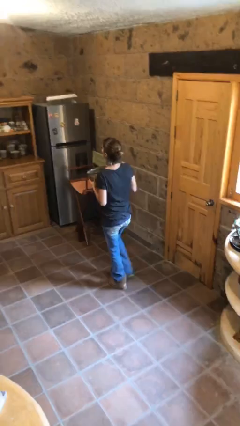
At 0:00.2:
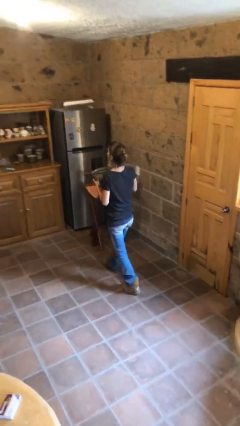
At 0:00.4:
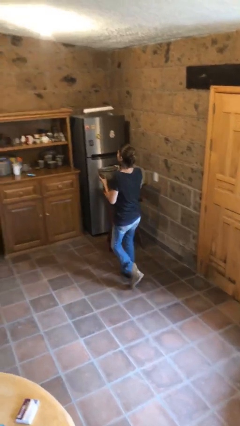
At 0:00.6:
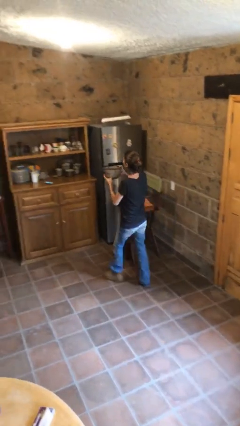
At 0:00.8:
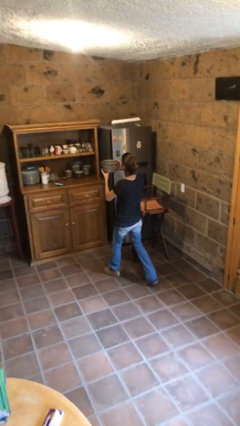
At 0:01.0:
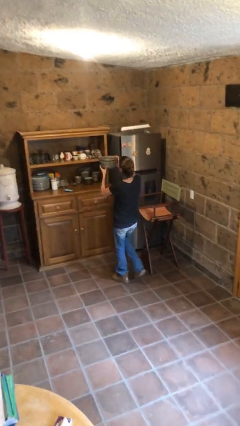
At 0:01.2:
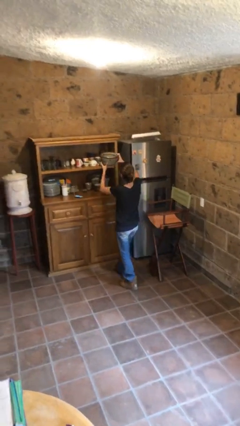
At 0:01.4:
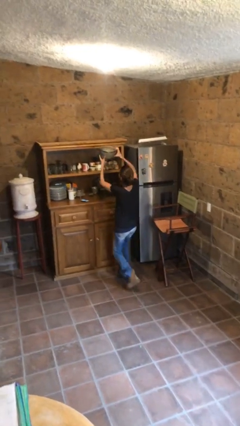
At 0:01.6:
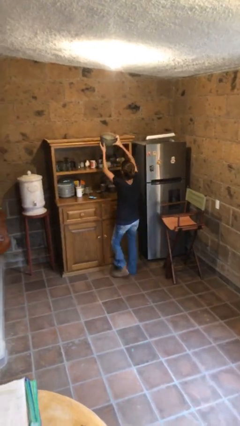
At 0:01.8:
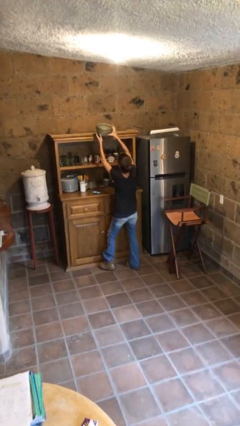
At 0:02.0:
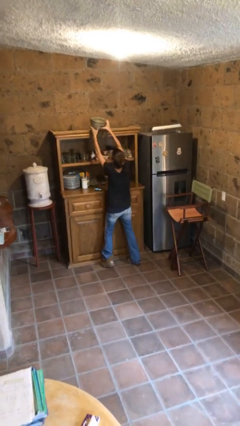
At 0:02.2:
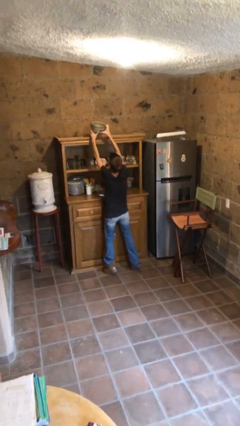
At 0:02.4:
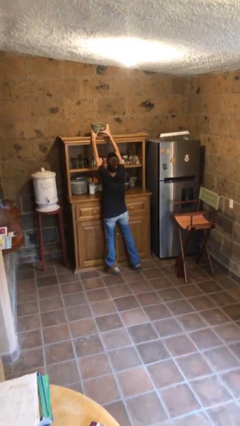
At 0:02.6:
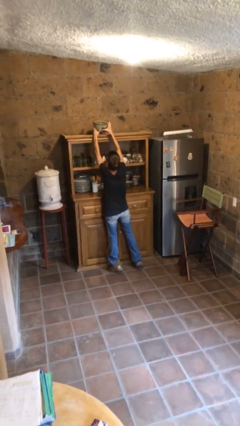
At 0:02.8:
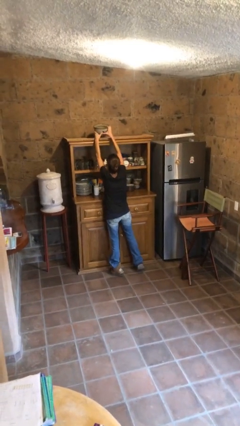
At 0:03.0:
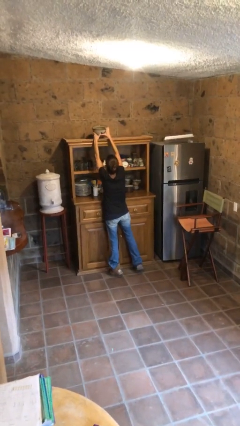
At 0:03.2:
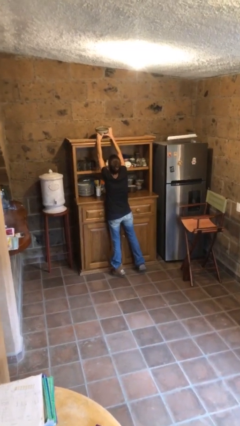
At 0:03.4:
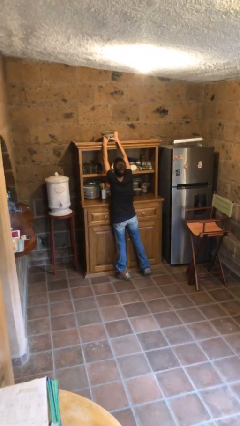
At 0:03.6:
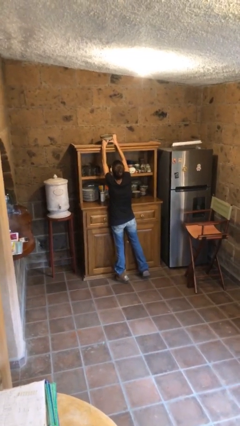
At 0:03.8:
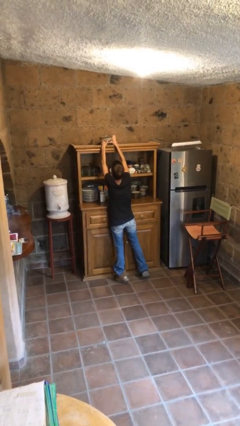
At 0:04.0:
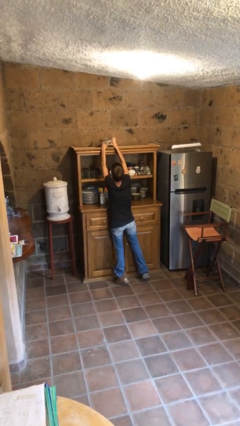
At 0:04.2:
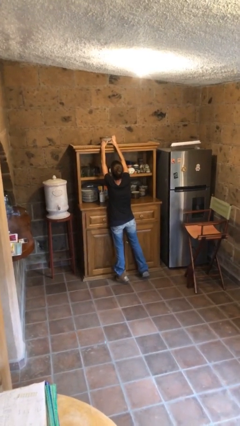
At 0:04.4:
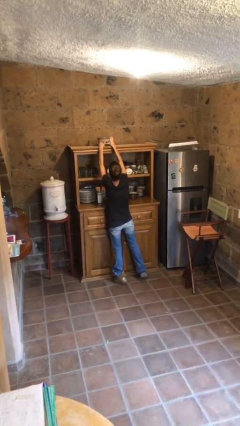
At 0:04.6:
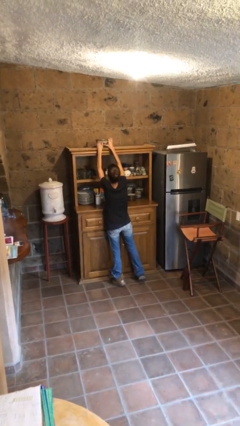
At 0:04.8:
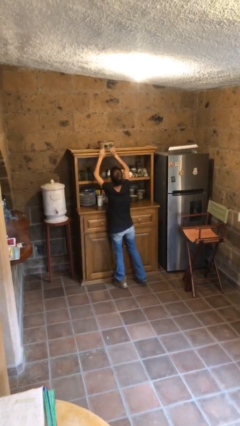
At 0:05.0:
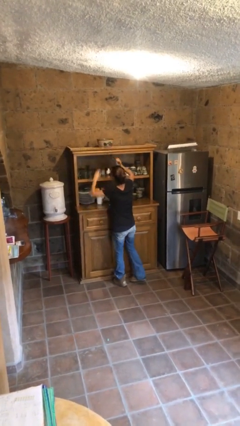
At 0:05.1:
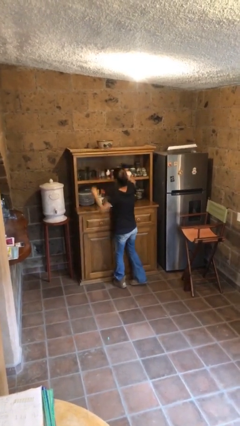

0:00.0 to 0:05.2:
person puts down object on shelf

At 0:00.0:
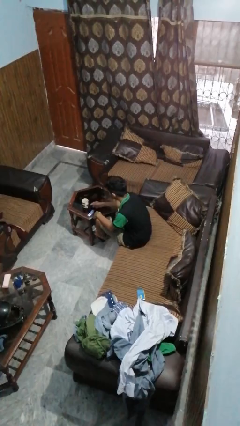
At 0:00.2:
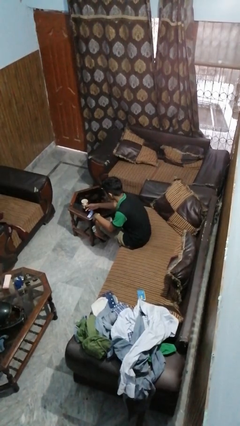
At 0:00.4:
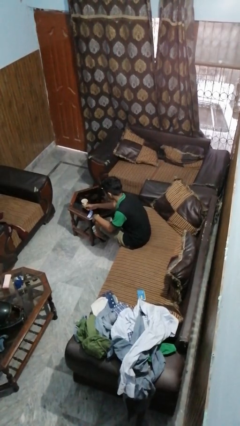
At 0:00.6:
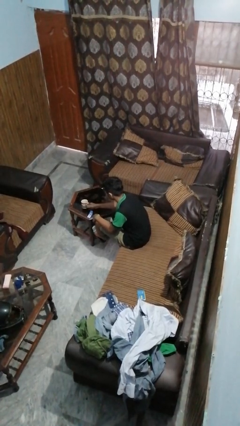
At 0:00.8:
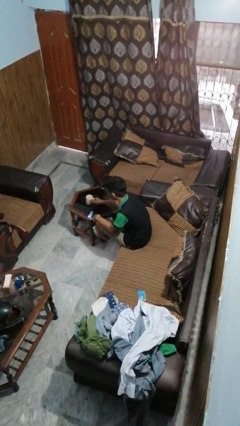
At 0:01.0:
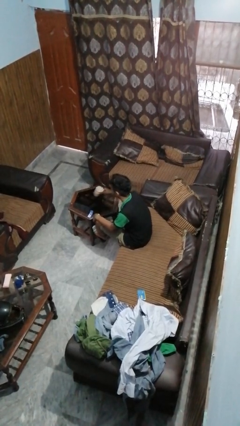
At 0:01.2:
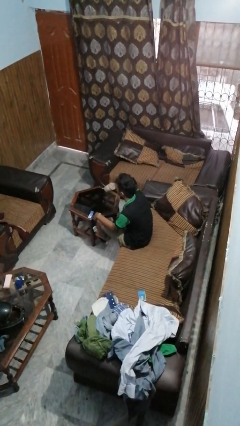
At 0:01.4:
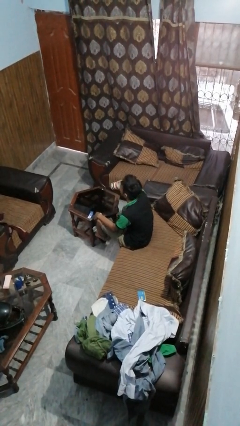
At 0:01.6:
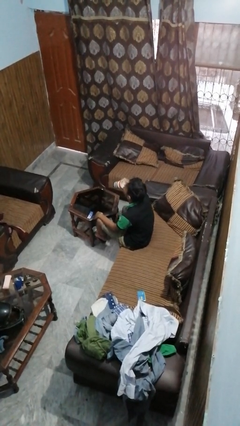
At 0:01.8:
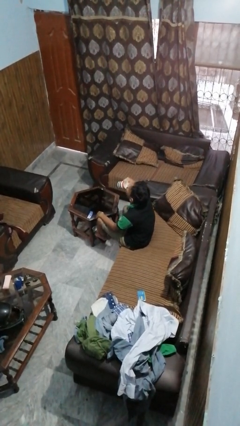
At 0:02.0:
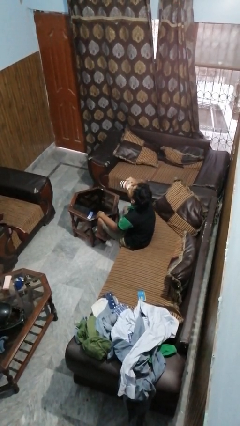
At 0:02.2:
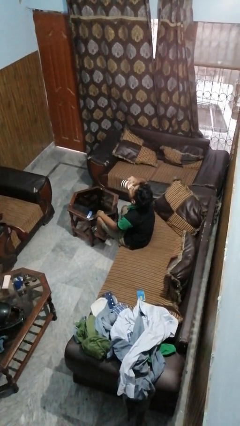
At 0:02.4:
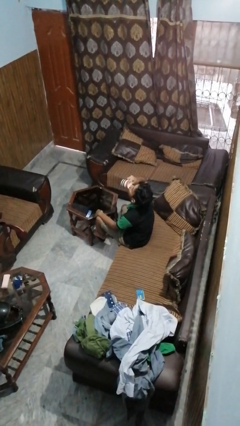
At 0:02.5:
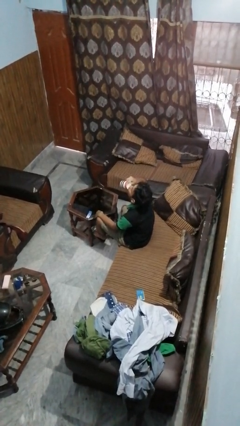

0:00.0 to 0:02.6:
person drinks from cup

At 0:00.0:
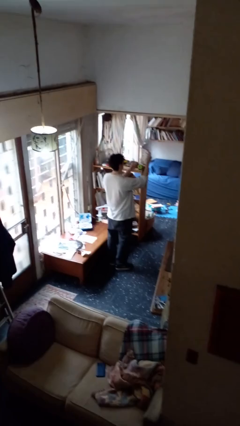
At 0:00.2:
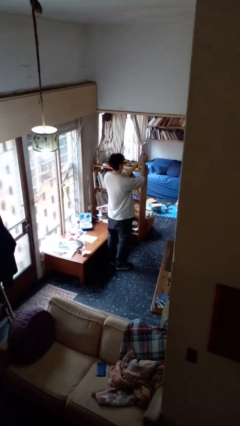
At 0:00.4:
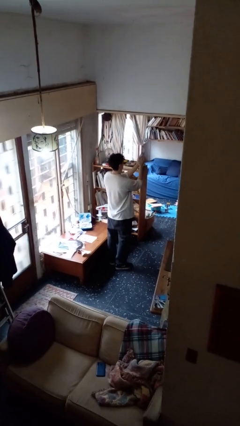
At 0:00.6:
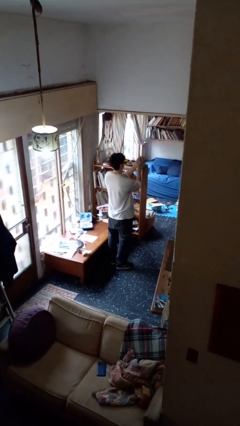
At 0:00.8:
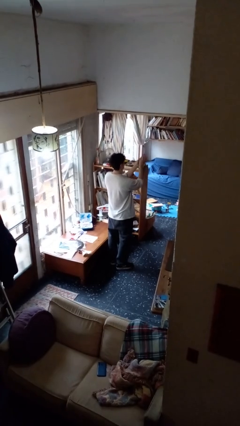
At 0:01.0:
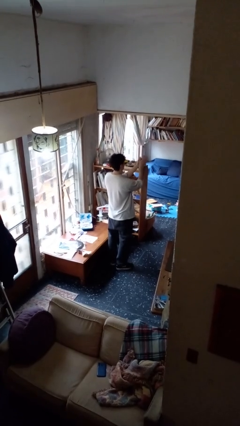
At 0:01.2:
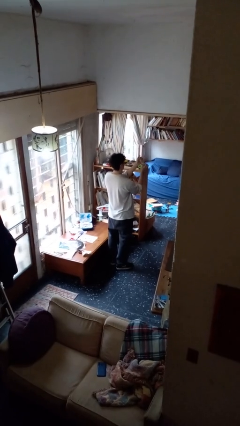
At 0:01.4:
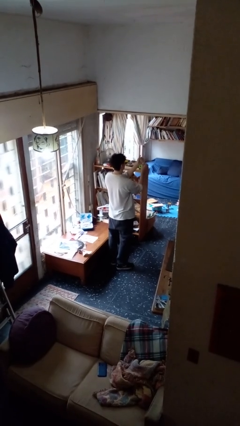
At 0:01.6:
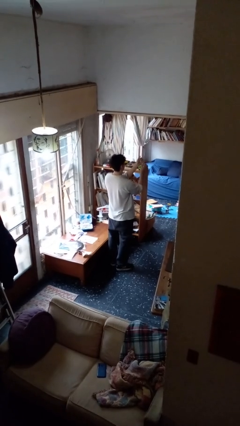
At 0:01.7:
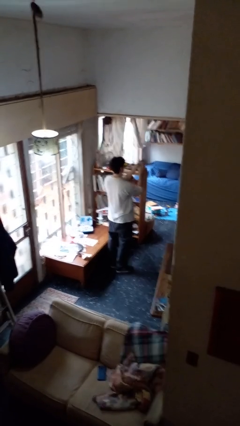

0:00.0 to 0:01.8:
person crumples paper

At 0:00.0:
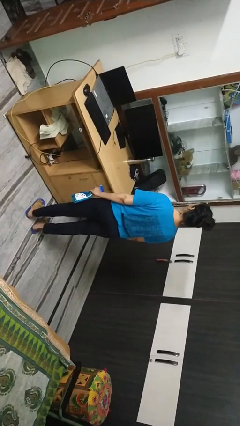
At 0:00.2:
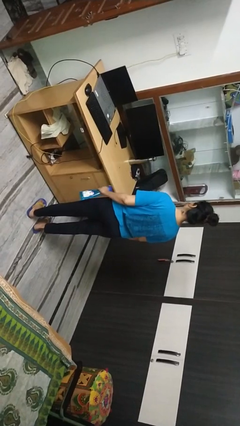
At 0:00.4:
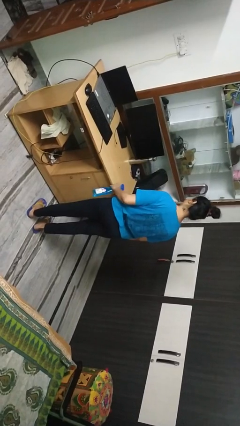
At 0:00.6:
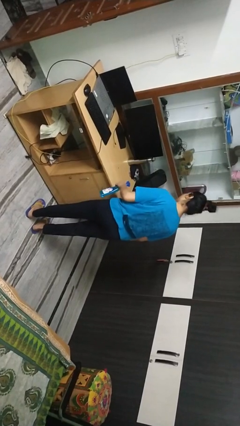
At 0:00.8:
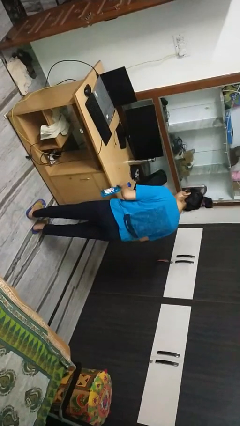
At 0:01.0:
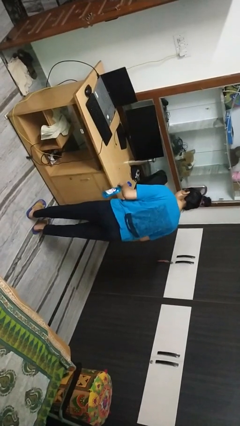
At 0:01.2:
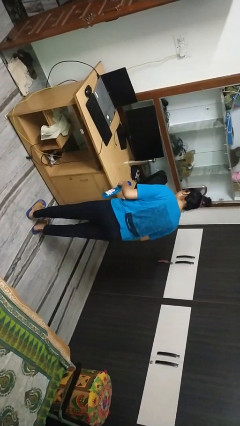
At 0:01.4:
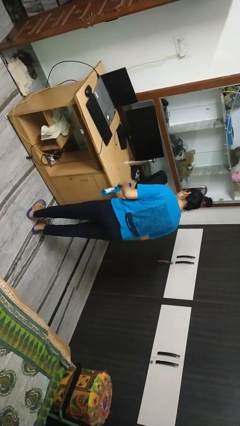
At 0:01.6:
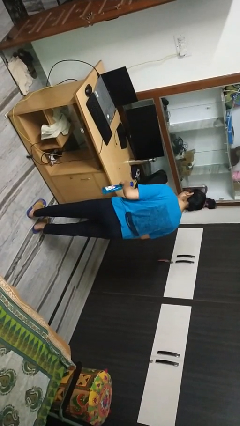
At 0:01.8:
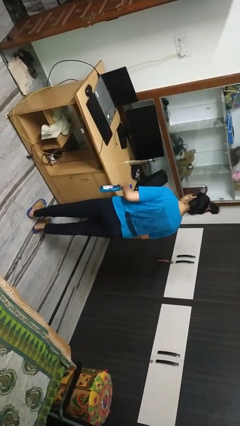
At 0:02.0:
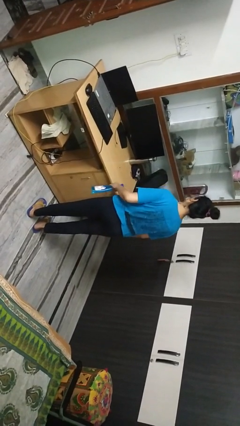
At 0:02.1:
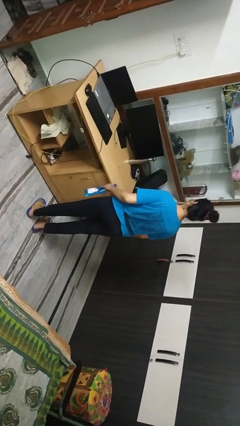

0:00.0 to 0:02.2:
person sprays from bottle

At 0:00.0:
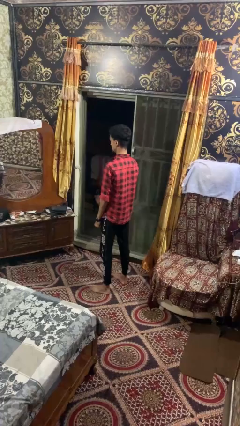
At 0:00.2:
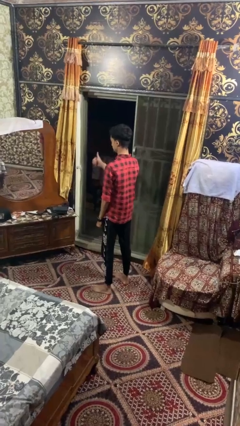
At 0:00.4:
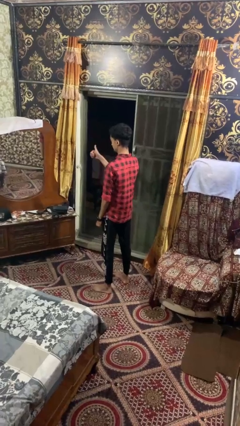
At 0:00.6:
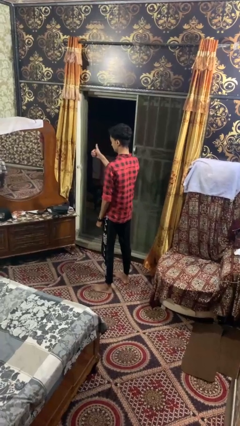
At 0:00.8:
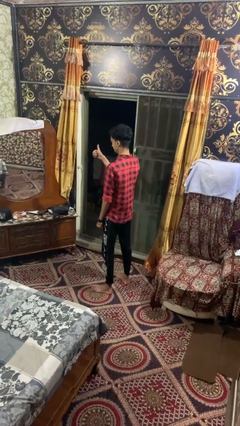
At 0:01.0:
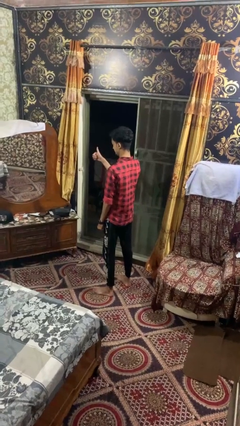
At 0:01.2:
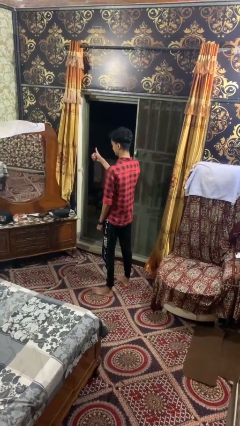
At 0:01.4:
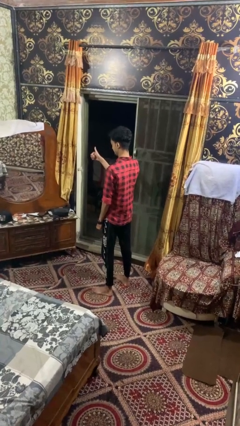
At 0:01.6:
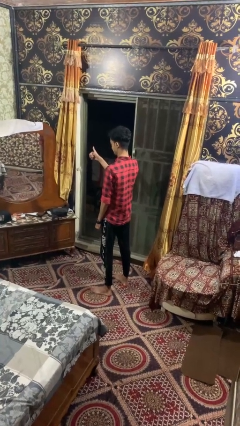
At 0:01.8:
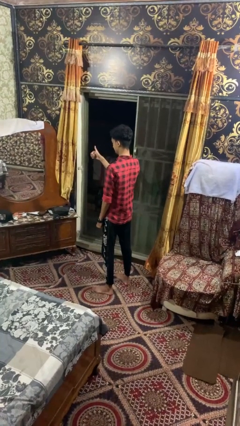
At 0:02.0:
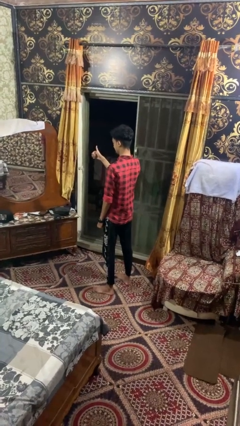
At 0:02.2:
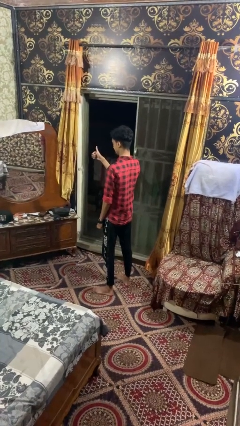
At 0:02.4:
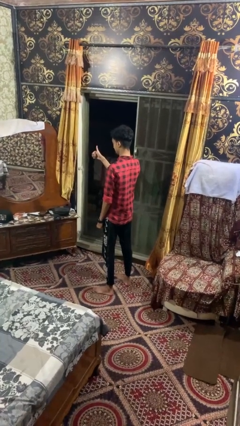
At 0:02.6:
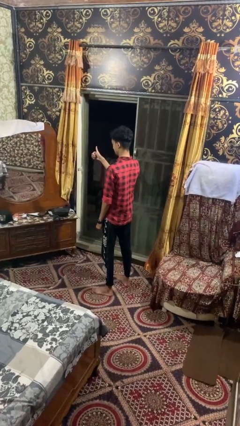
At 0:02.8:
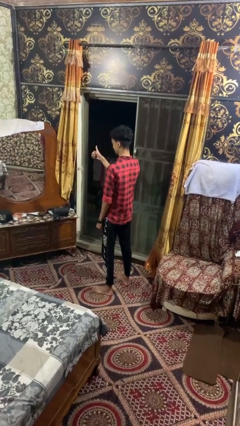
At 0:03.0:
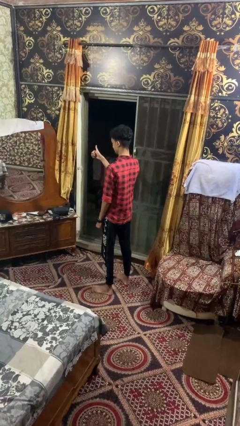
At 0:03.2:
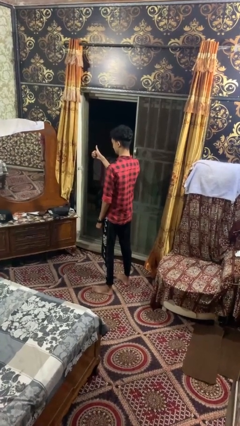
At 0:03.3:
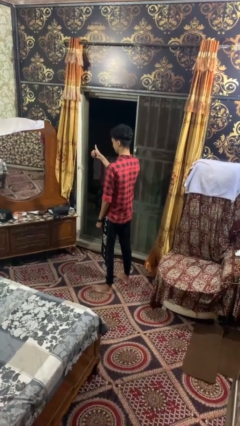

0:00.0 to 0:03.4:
person gestures thumbs up

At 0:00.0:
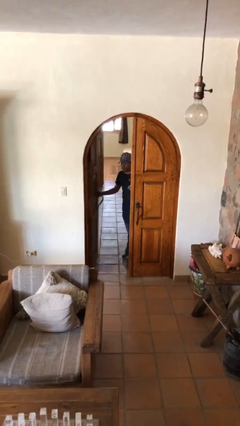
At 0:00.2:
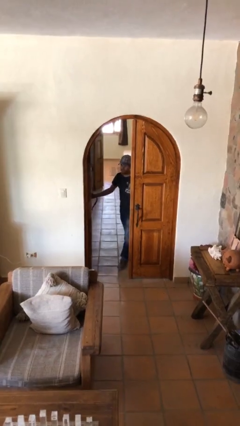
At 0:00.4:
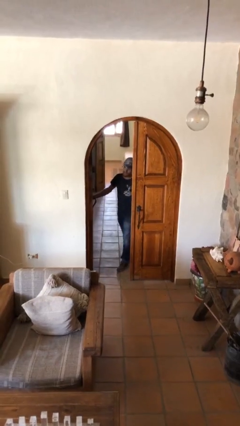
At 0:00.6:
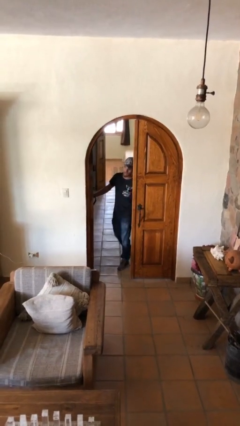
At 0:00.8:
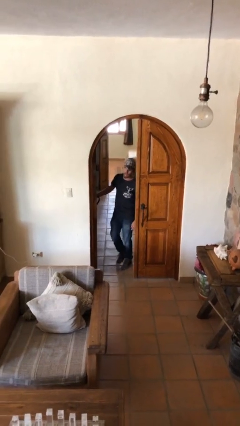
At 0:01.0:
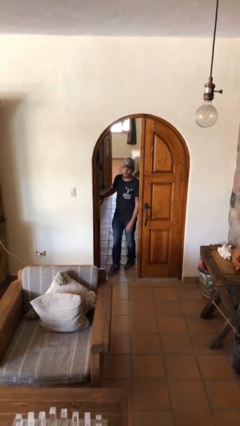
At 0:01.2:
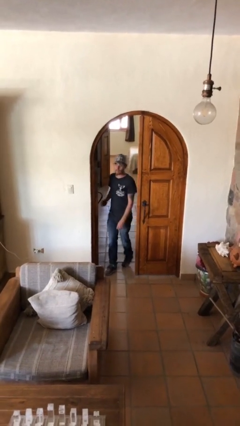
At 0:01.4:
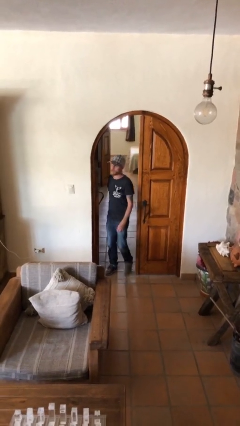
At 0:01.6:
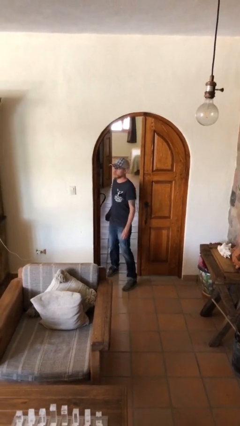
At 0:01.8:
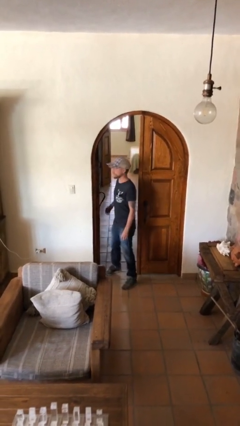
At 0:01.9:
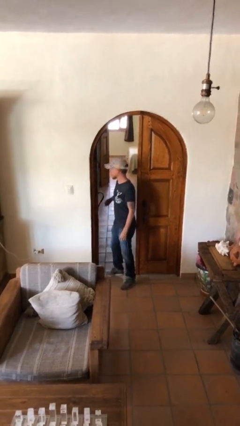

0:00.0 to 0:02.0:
person enters scene through structure
